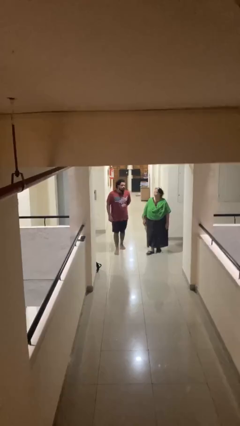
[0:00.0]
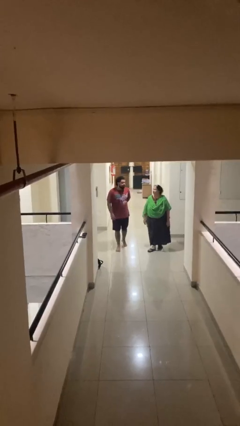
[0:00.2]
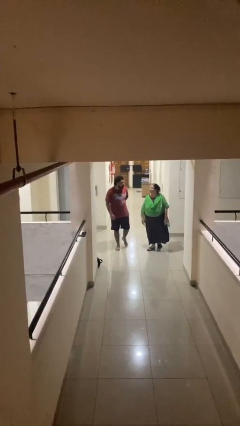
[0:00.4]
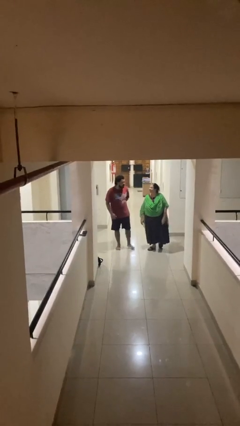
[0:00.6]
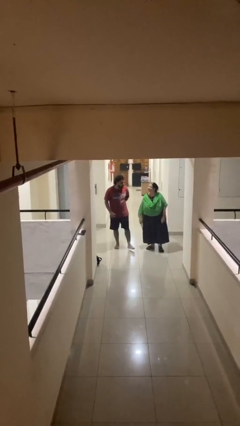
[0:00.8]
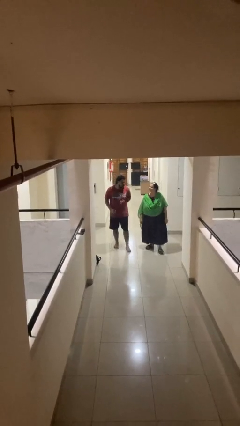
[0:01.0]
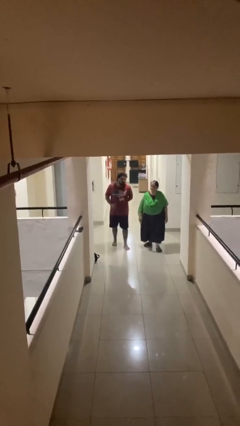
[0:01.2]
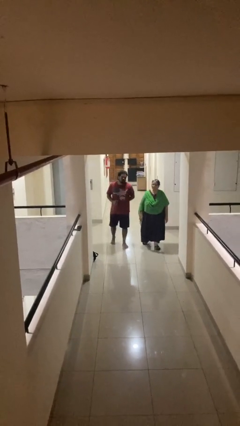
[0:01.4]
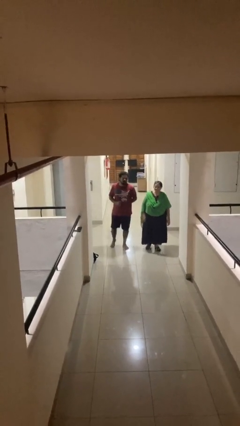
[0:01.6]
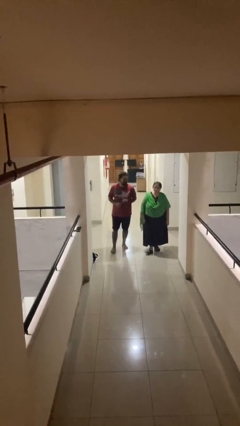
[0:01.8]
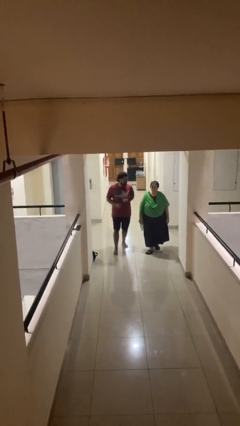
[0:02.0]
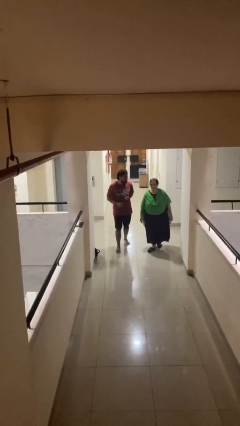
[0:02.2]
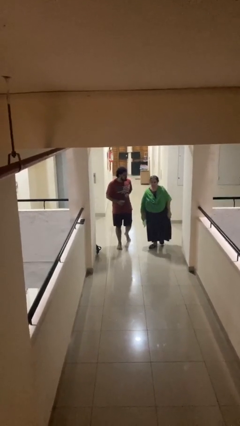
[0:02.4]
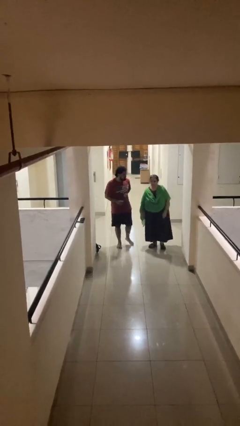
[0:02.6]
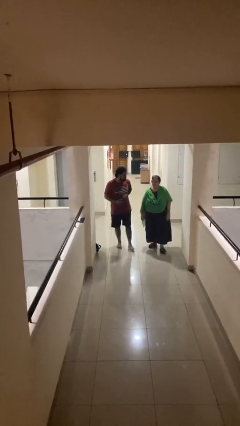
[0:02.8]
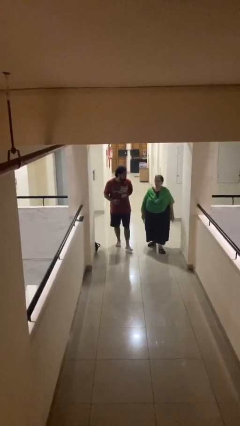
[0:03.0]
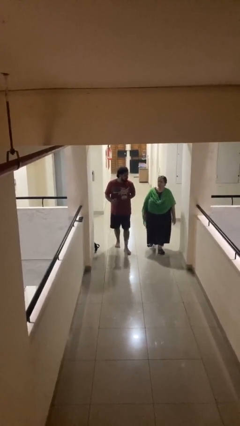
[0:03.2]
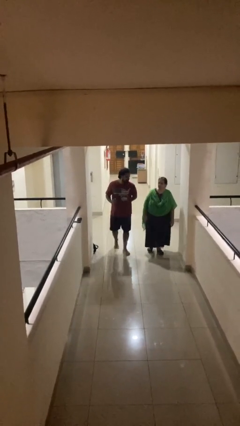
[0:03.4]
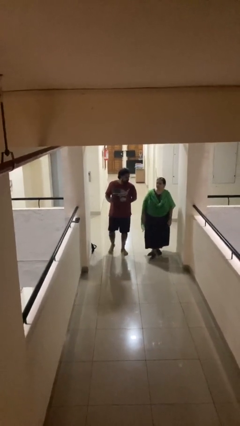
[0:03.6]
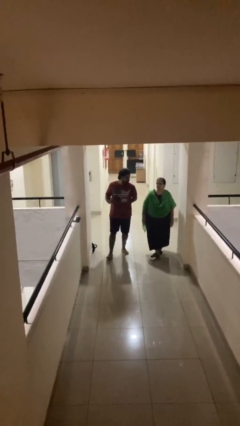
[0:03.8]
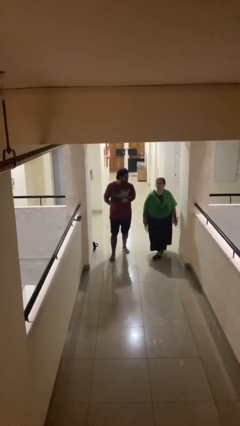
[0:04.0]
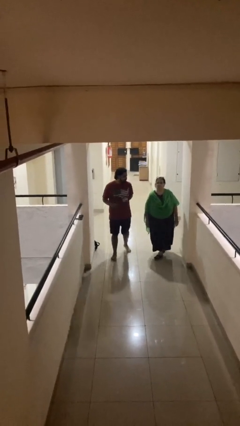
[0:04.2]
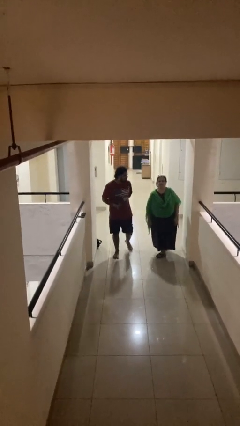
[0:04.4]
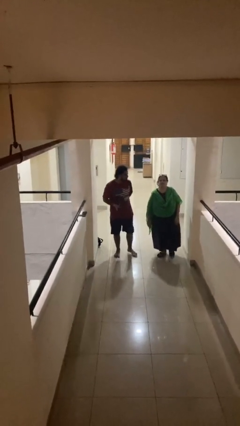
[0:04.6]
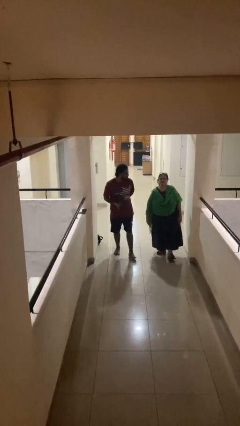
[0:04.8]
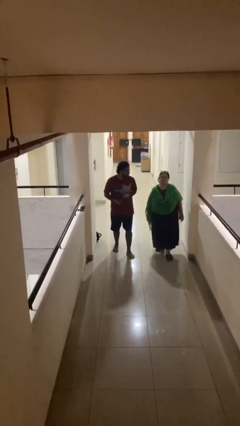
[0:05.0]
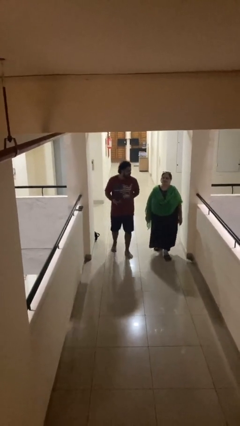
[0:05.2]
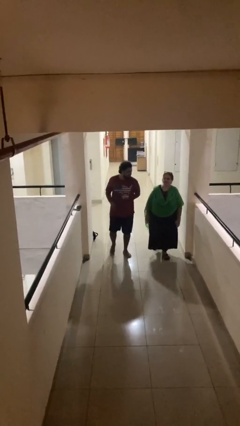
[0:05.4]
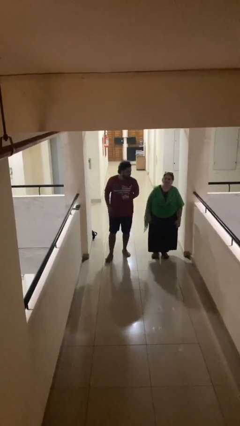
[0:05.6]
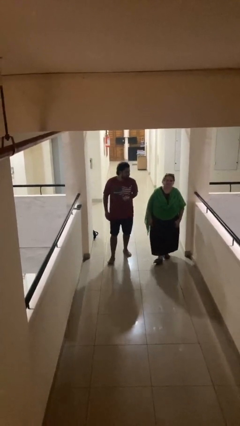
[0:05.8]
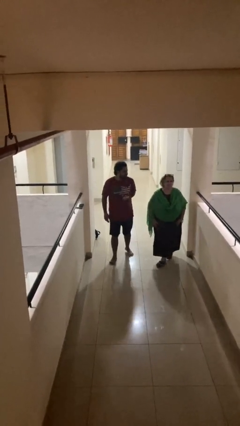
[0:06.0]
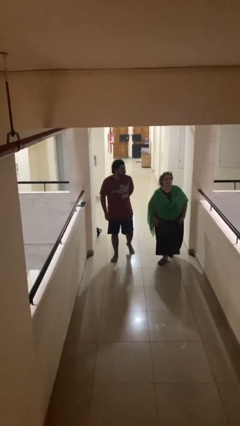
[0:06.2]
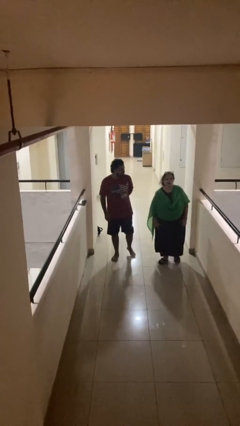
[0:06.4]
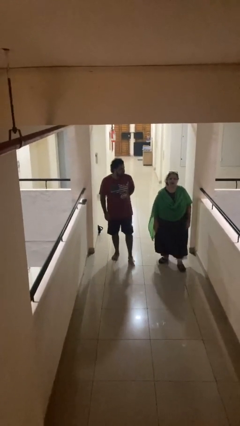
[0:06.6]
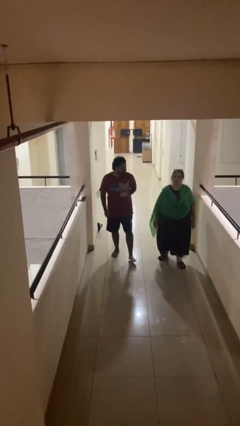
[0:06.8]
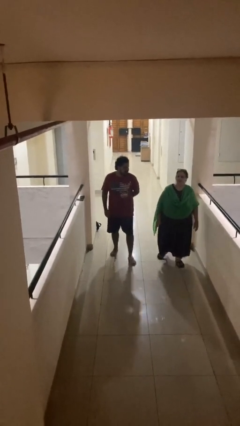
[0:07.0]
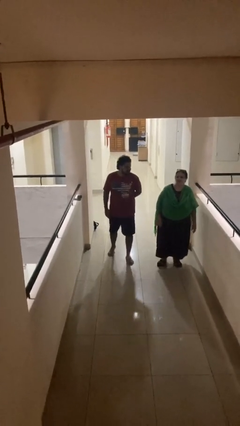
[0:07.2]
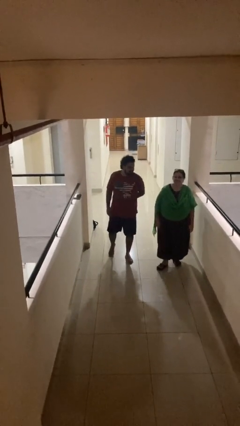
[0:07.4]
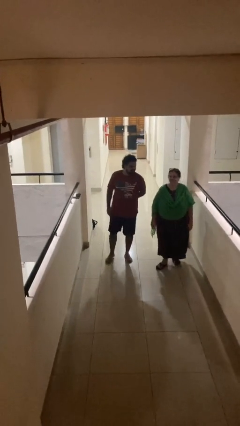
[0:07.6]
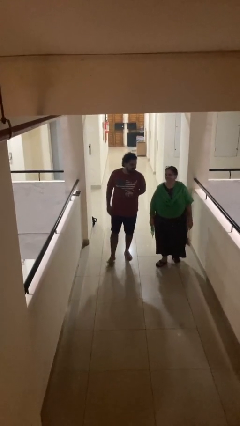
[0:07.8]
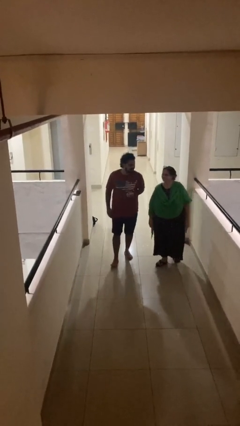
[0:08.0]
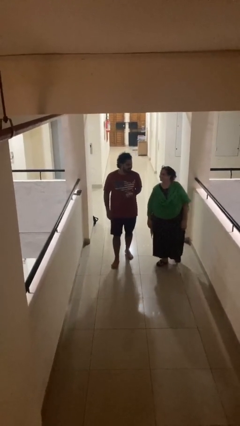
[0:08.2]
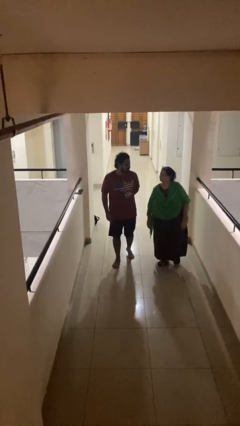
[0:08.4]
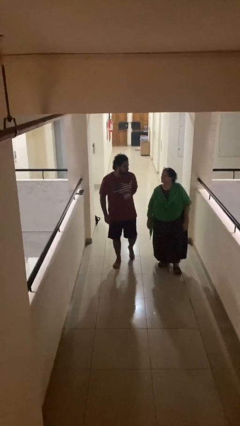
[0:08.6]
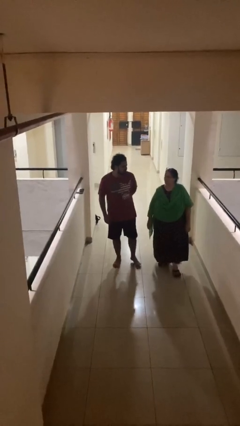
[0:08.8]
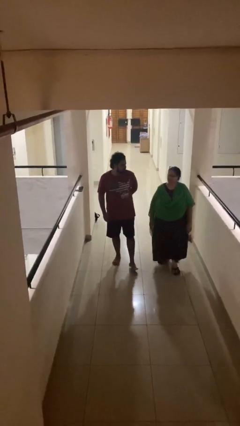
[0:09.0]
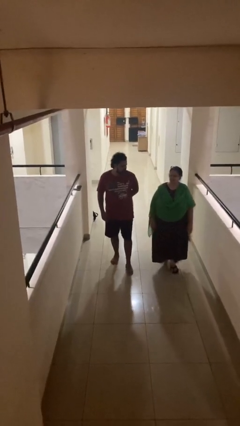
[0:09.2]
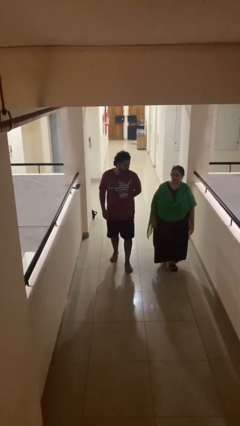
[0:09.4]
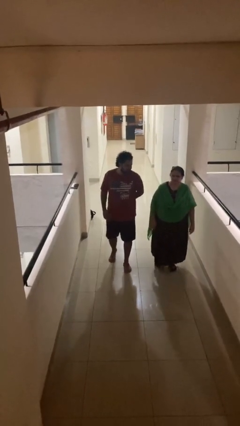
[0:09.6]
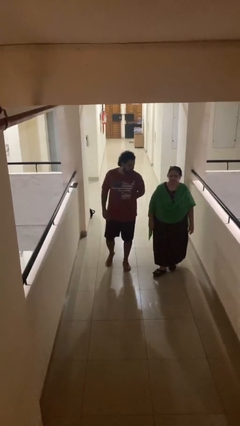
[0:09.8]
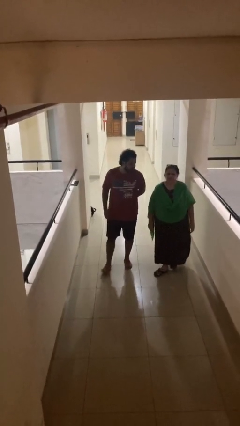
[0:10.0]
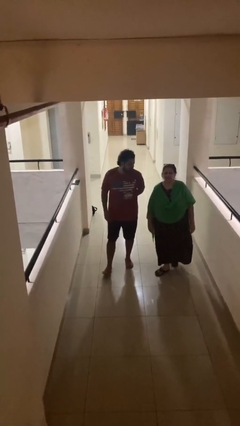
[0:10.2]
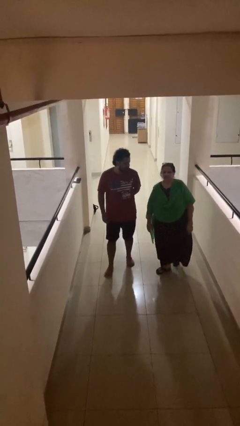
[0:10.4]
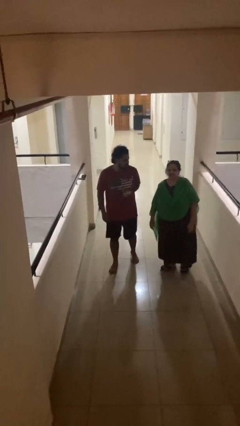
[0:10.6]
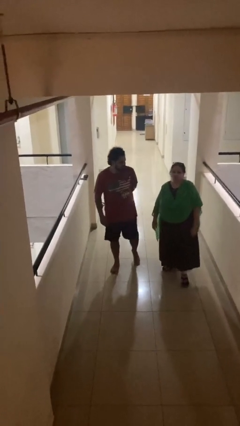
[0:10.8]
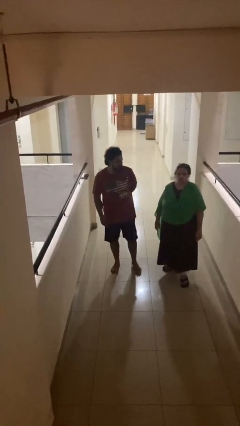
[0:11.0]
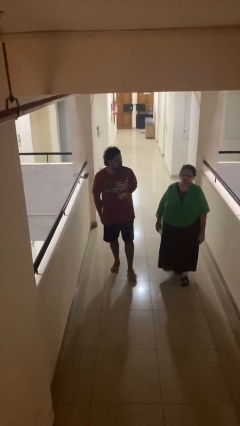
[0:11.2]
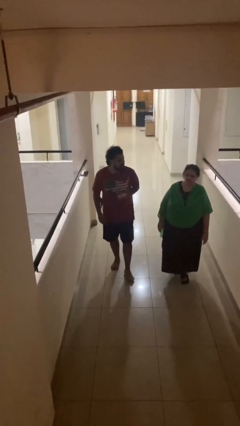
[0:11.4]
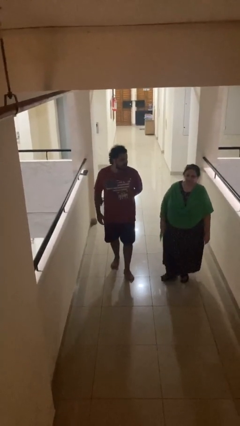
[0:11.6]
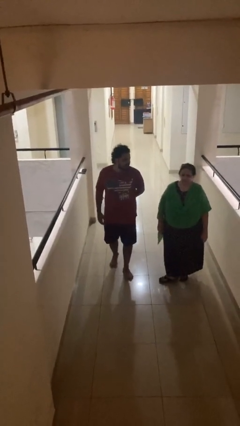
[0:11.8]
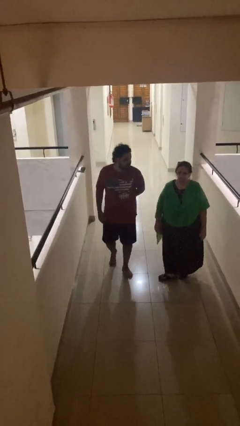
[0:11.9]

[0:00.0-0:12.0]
person talks to person

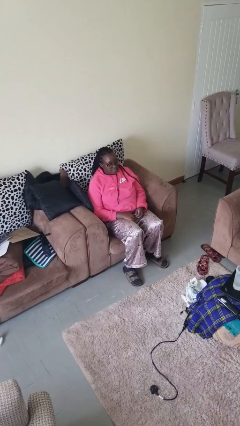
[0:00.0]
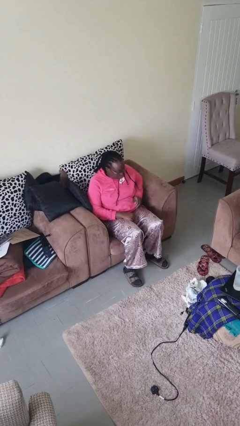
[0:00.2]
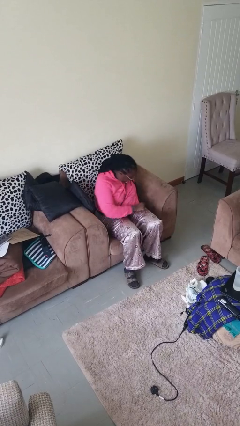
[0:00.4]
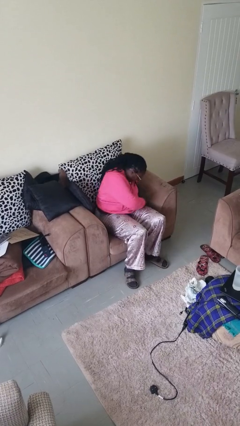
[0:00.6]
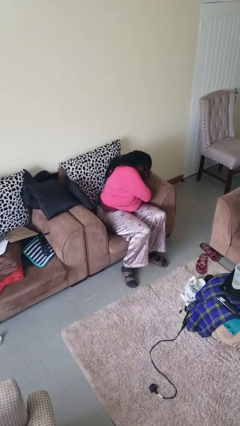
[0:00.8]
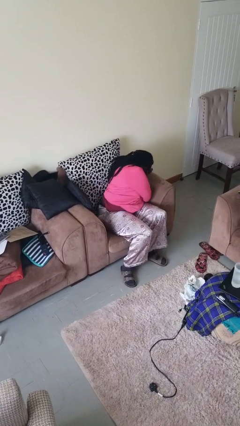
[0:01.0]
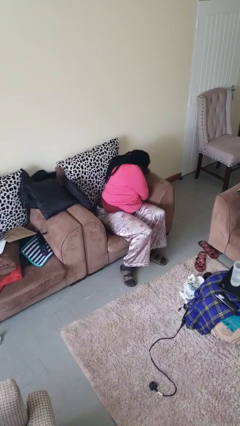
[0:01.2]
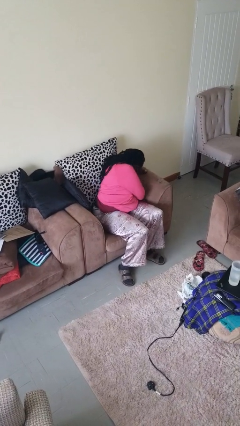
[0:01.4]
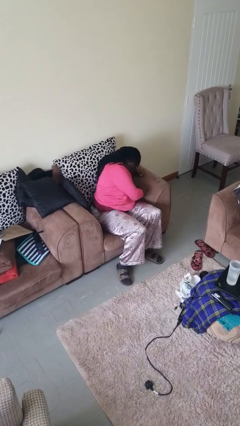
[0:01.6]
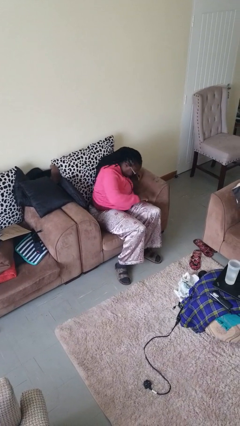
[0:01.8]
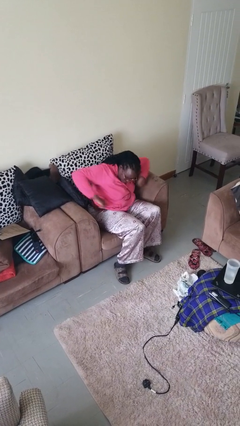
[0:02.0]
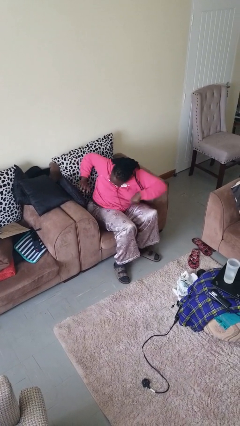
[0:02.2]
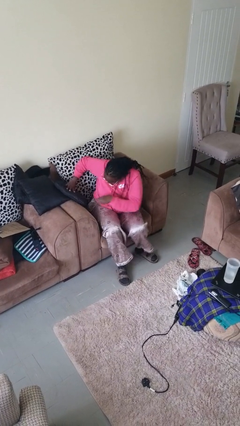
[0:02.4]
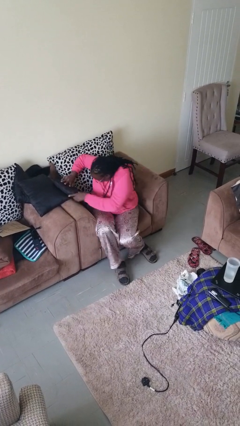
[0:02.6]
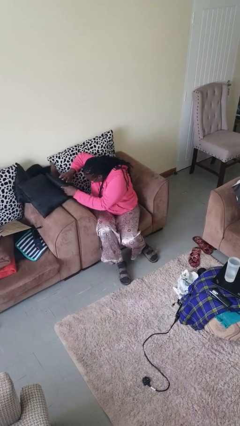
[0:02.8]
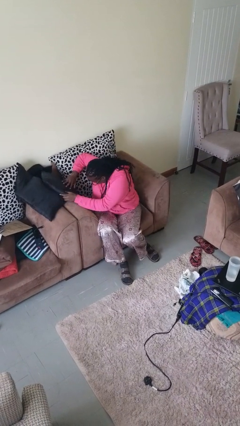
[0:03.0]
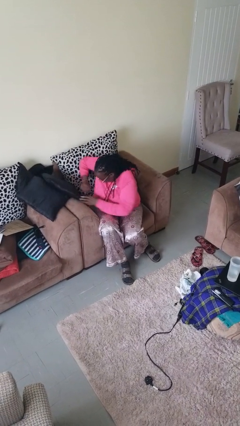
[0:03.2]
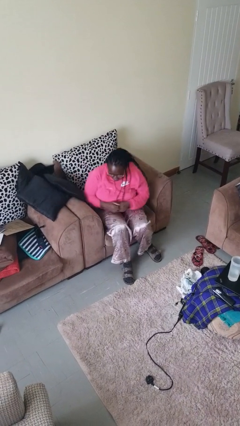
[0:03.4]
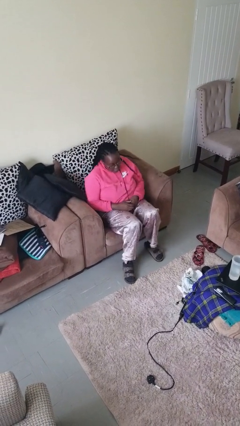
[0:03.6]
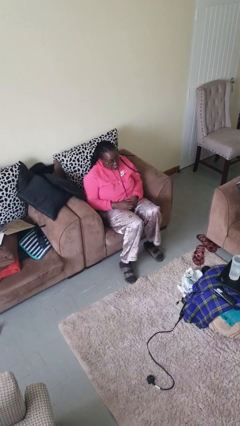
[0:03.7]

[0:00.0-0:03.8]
person searches in couch

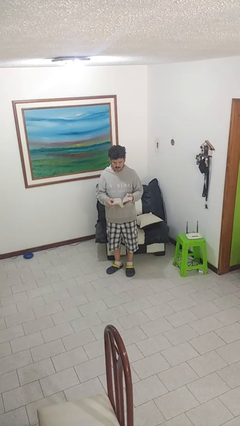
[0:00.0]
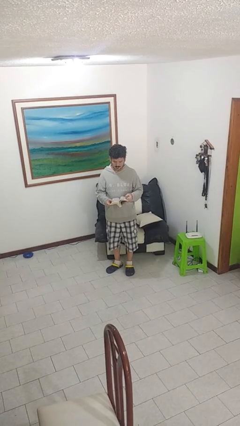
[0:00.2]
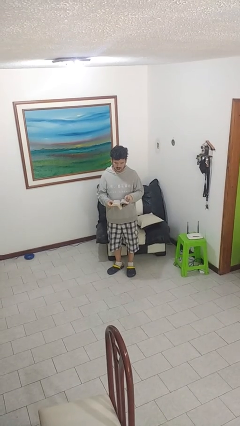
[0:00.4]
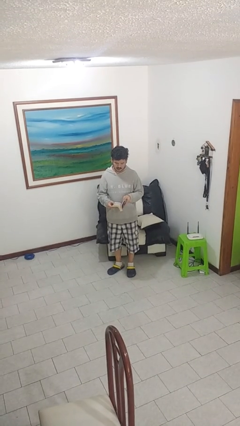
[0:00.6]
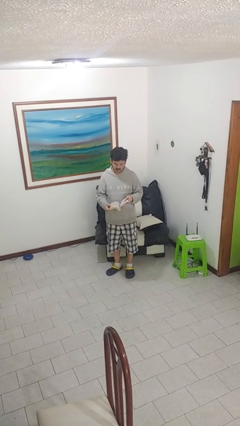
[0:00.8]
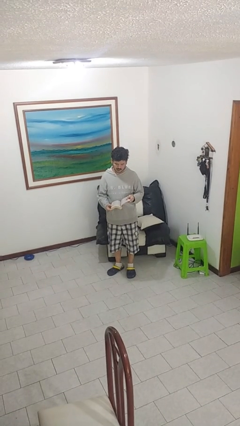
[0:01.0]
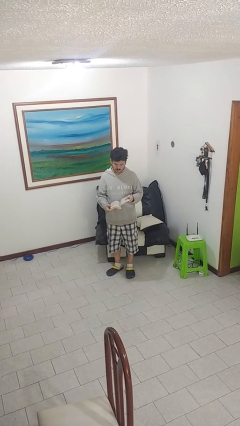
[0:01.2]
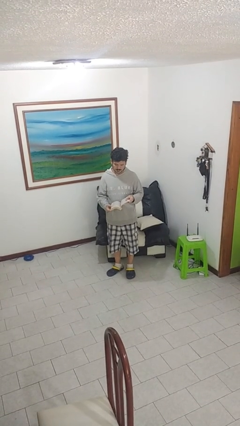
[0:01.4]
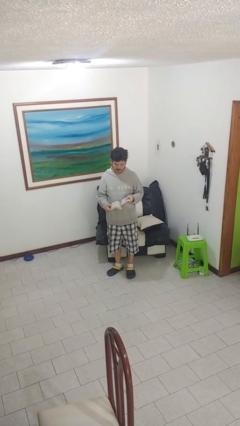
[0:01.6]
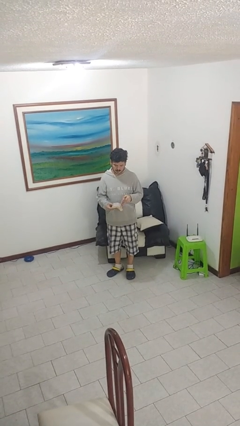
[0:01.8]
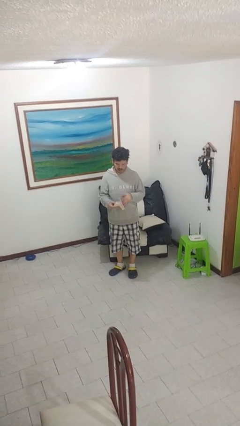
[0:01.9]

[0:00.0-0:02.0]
person reads book
